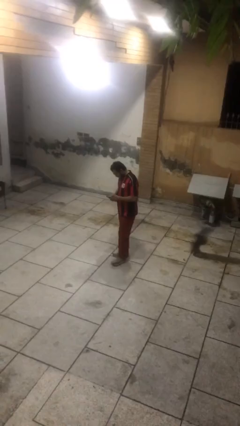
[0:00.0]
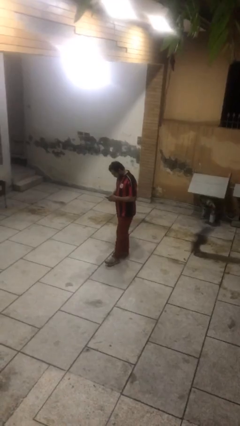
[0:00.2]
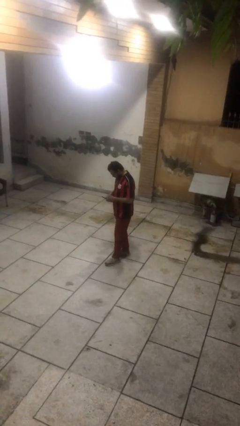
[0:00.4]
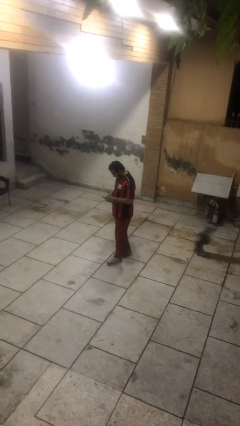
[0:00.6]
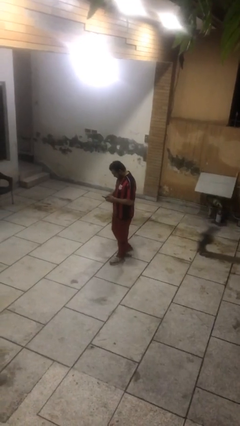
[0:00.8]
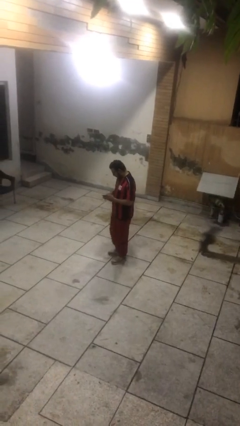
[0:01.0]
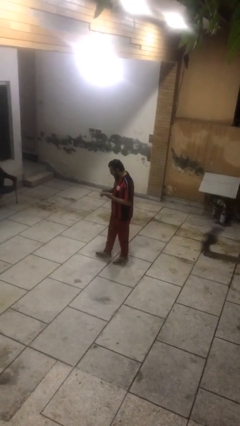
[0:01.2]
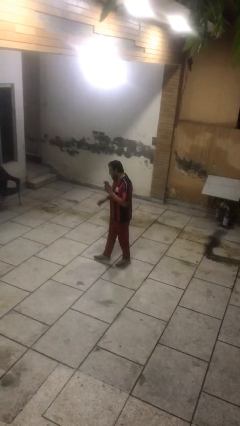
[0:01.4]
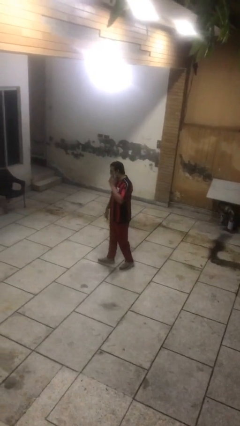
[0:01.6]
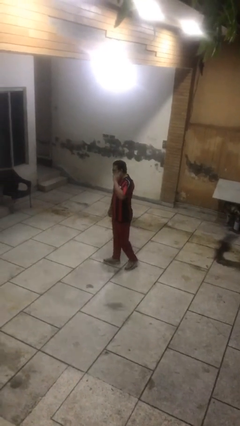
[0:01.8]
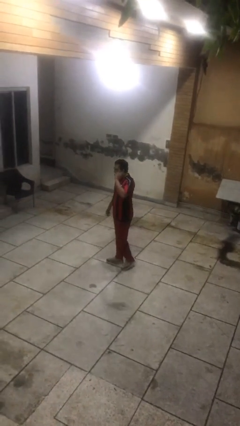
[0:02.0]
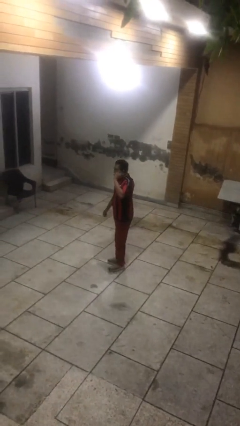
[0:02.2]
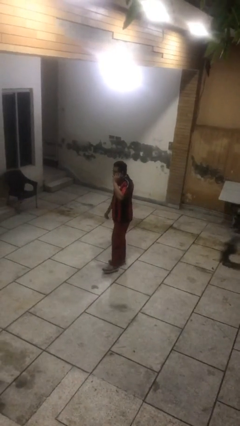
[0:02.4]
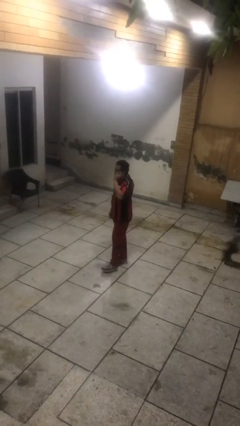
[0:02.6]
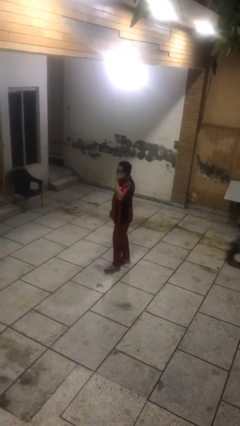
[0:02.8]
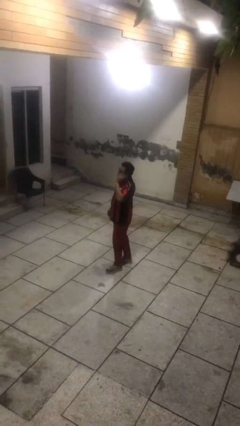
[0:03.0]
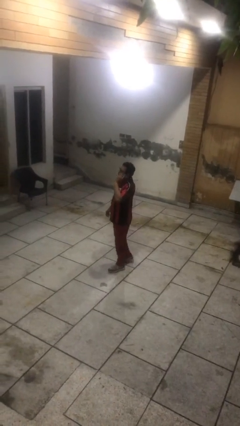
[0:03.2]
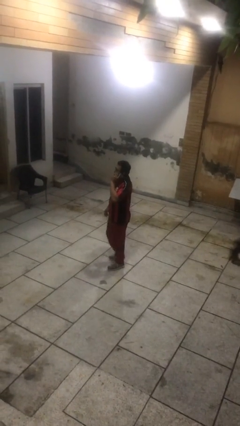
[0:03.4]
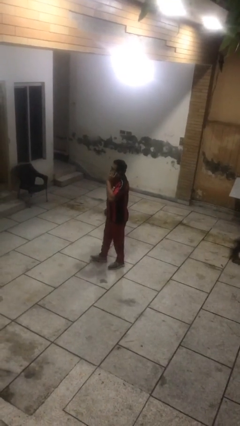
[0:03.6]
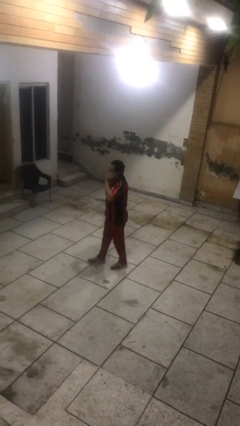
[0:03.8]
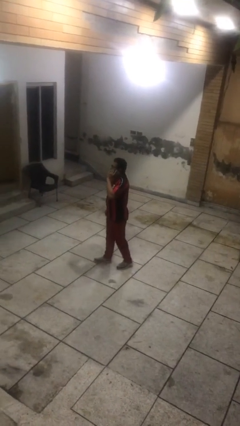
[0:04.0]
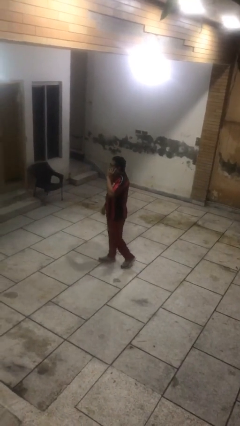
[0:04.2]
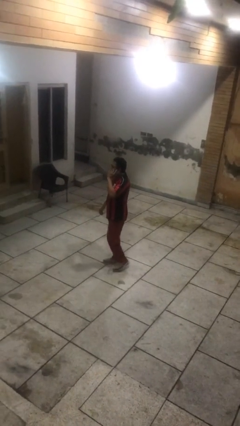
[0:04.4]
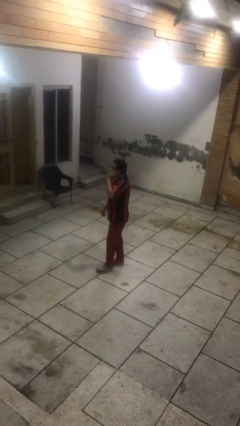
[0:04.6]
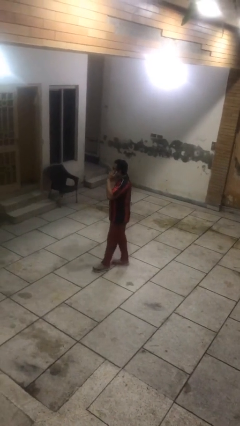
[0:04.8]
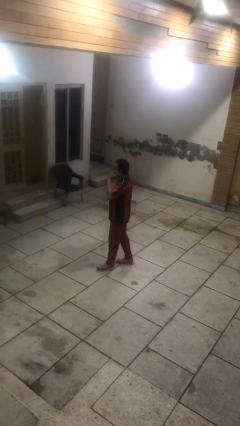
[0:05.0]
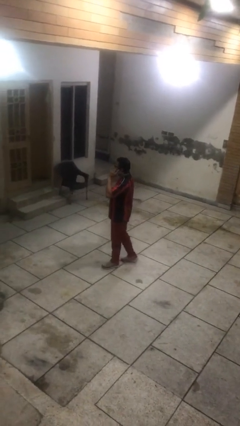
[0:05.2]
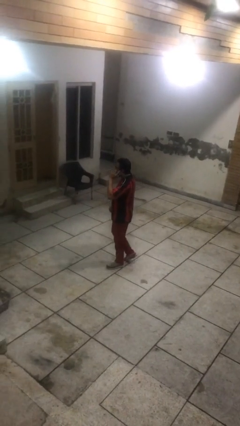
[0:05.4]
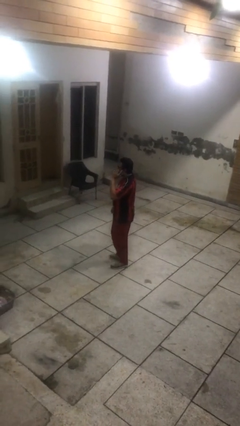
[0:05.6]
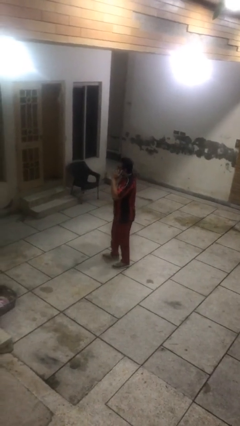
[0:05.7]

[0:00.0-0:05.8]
person talks on phone

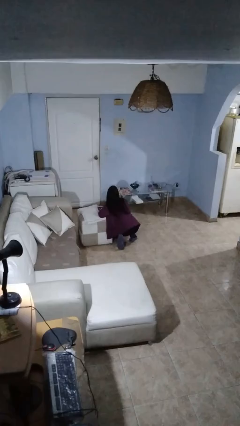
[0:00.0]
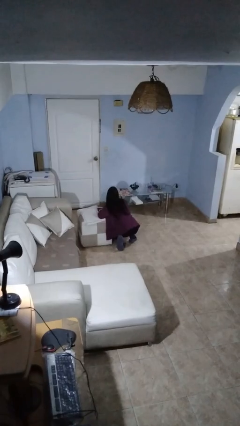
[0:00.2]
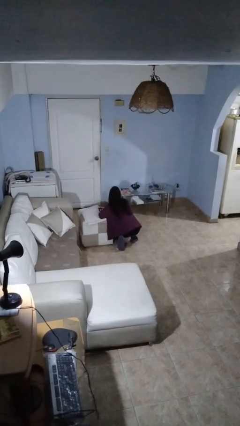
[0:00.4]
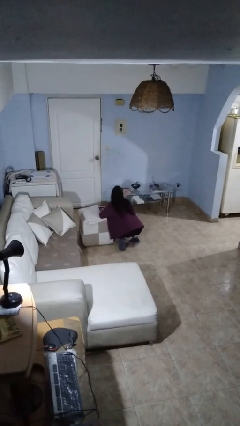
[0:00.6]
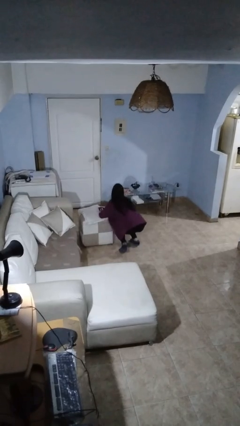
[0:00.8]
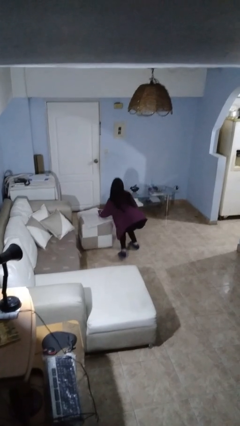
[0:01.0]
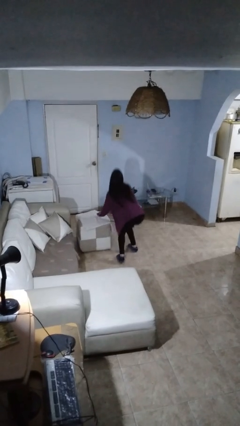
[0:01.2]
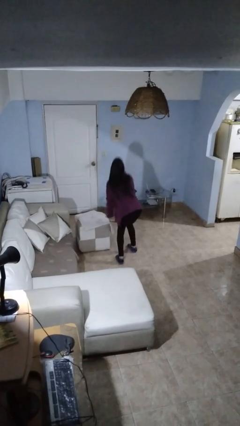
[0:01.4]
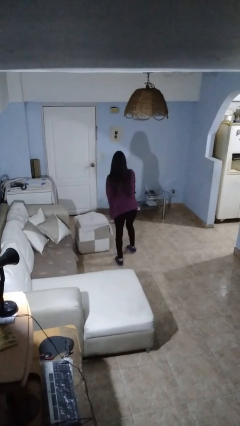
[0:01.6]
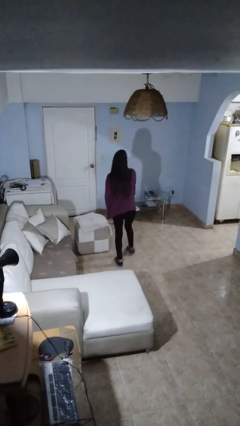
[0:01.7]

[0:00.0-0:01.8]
person stands up from floor

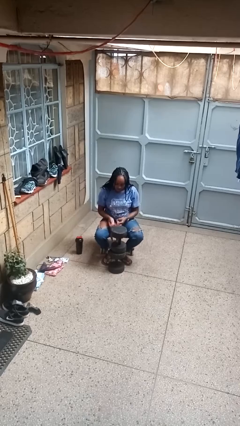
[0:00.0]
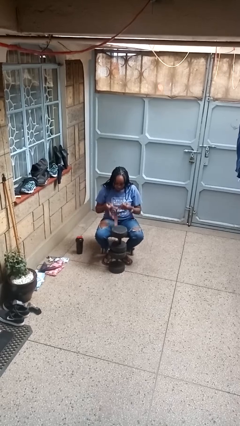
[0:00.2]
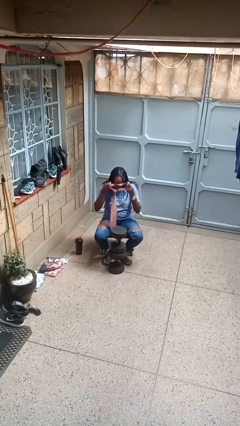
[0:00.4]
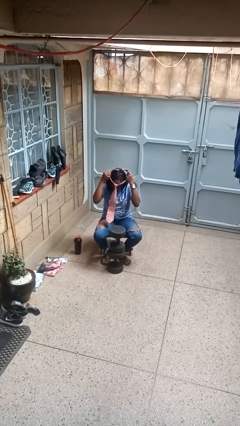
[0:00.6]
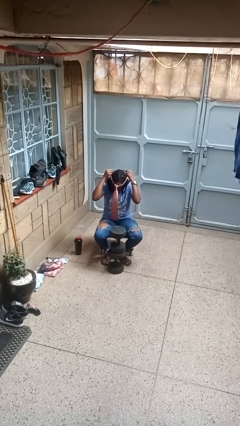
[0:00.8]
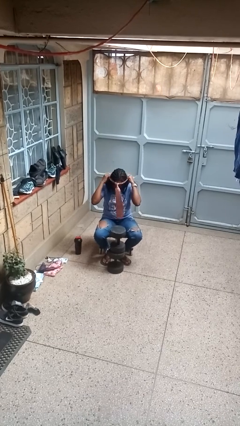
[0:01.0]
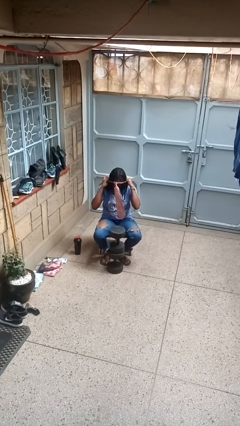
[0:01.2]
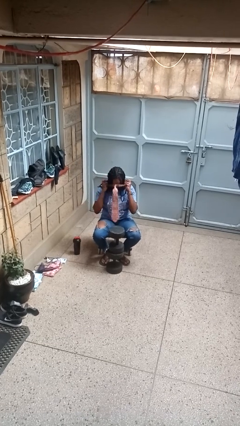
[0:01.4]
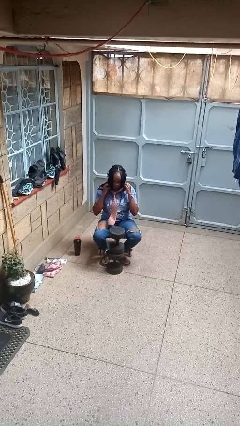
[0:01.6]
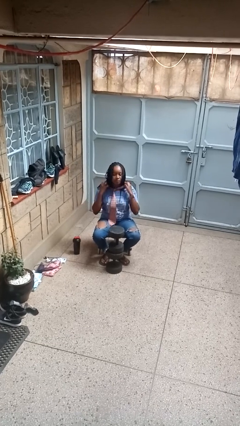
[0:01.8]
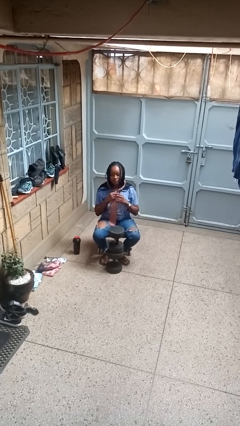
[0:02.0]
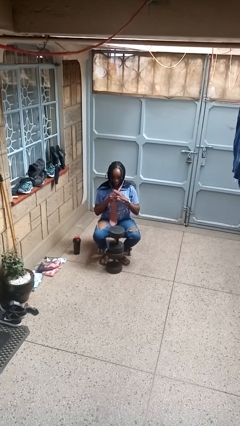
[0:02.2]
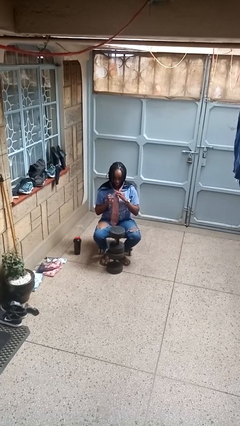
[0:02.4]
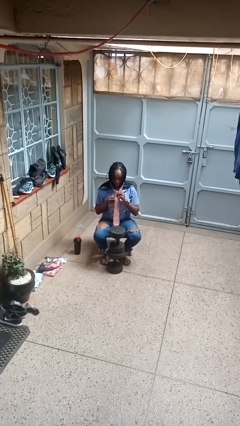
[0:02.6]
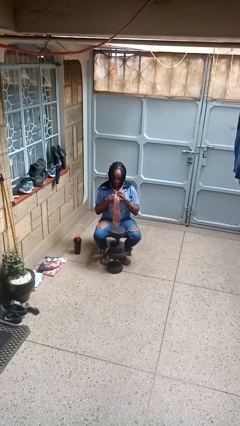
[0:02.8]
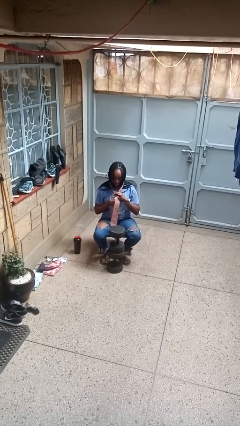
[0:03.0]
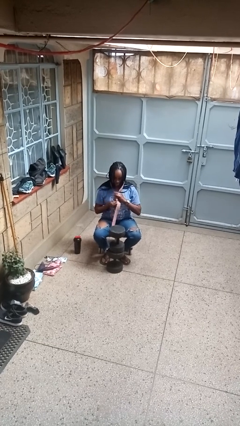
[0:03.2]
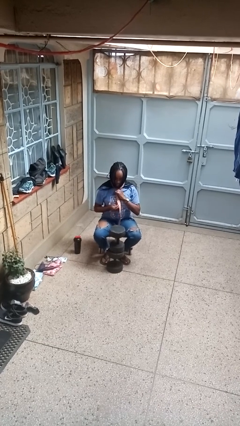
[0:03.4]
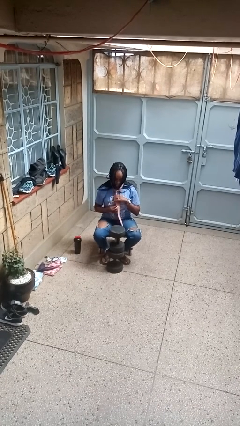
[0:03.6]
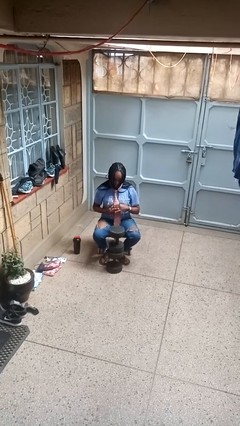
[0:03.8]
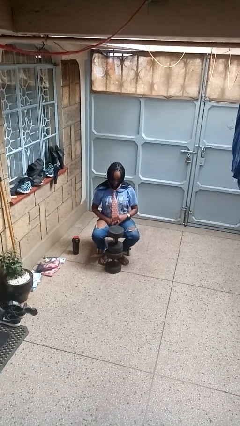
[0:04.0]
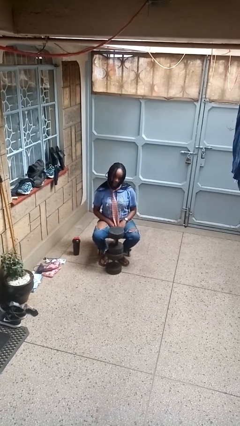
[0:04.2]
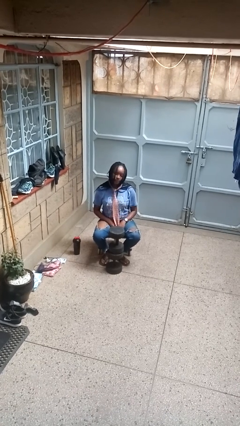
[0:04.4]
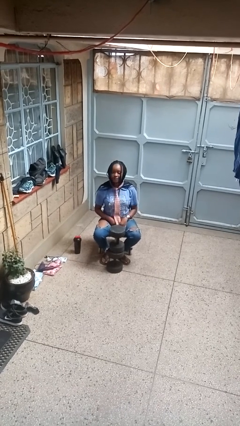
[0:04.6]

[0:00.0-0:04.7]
person puts on necktie

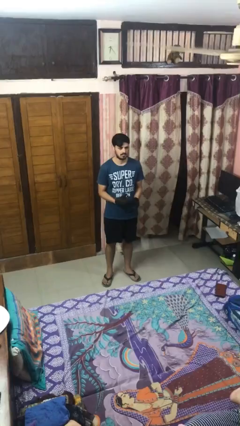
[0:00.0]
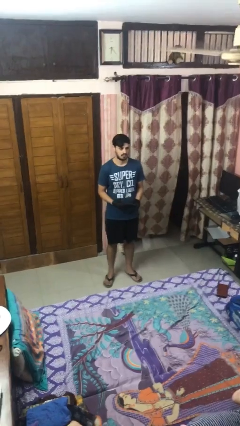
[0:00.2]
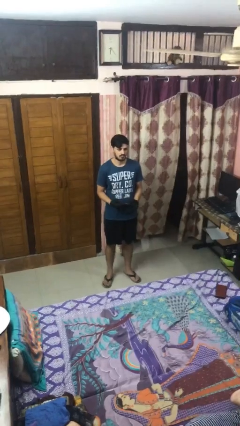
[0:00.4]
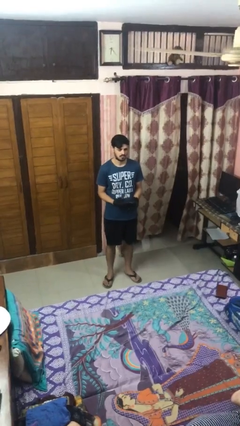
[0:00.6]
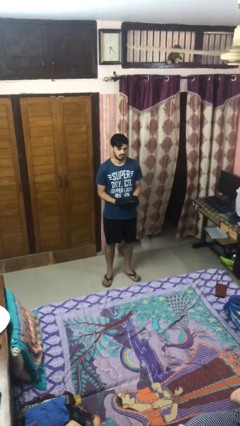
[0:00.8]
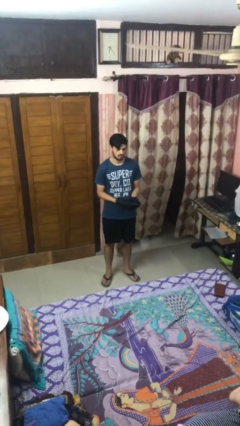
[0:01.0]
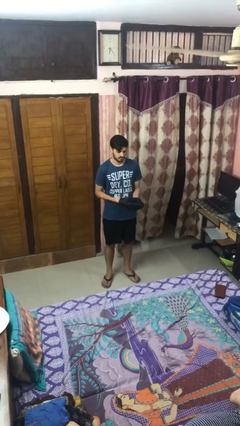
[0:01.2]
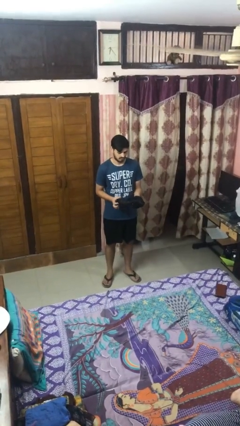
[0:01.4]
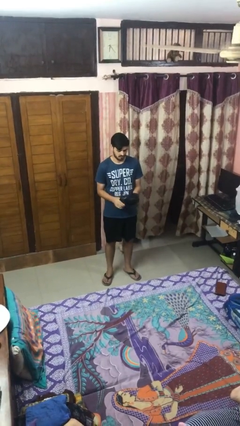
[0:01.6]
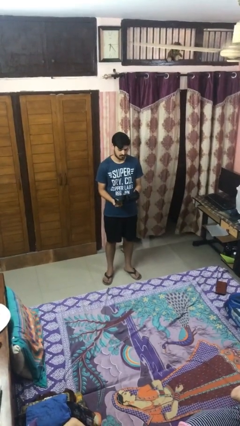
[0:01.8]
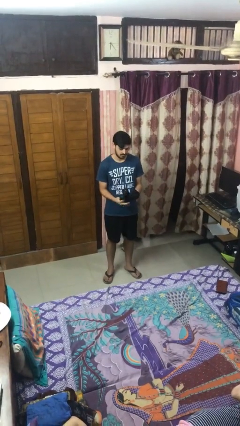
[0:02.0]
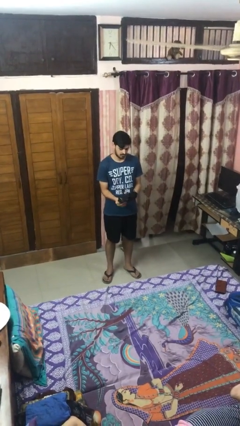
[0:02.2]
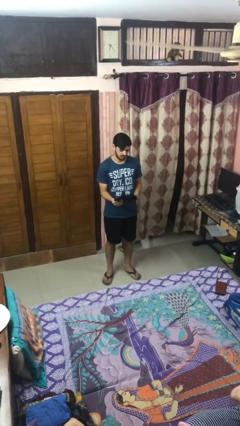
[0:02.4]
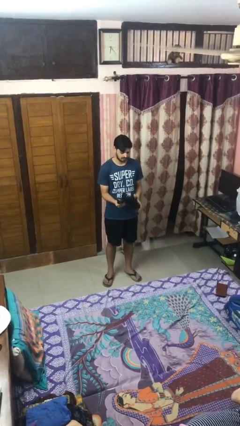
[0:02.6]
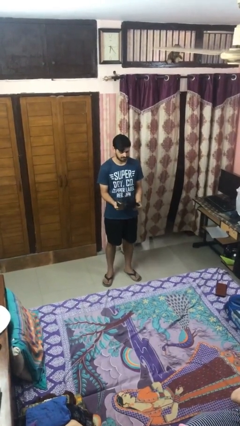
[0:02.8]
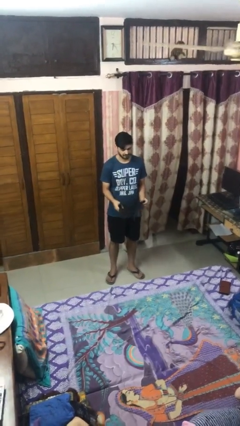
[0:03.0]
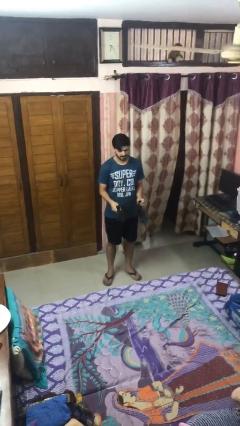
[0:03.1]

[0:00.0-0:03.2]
person takes off gloves

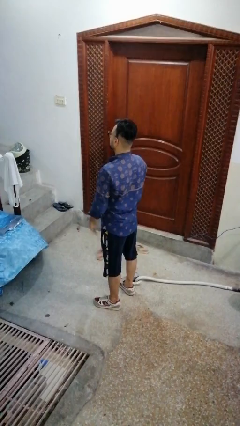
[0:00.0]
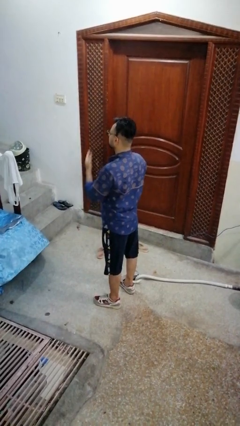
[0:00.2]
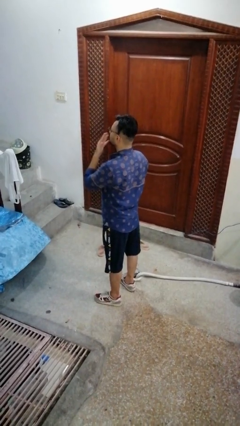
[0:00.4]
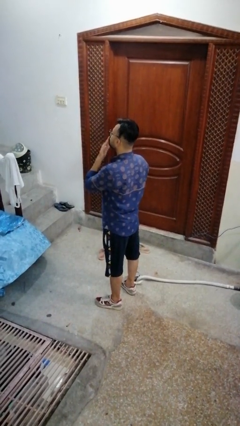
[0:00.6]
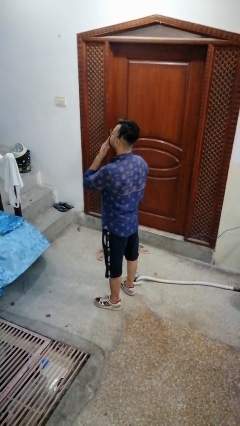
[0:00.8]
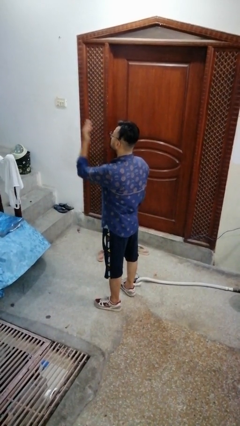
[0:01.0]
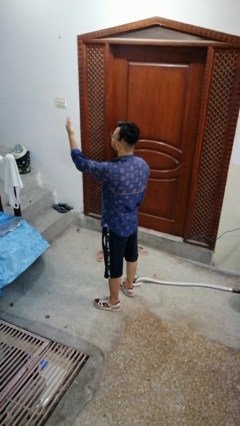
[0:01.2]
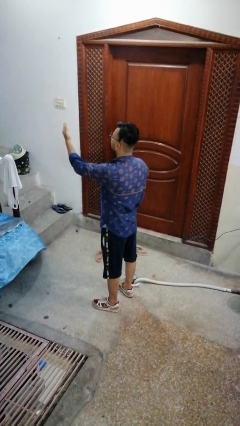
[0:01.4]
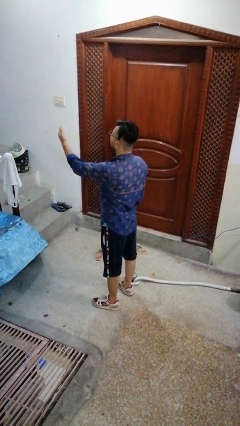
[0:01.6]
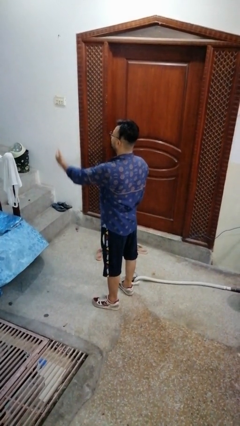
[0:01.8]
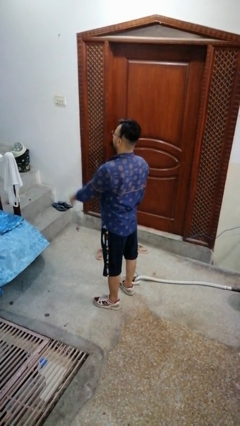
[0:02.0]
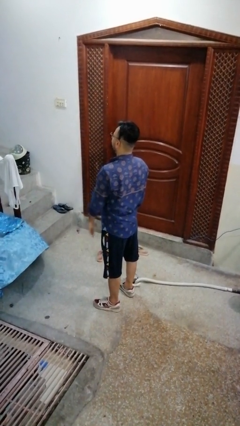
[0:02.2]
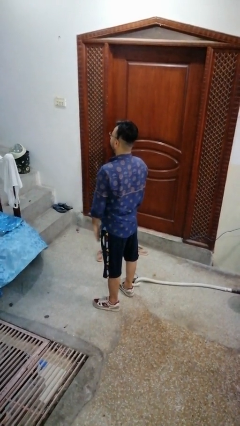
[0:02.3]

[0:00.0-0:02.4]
person gestures blow kiss
